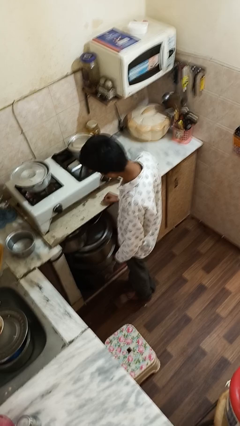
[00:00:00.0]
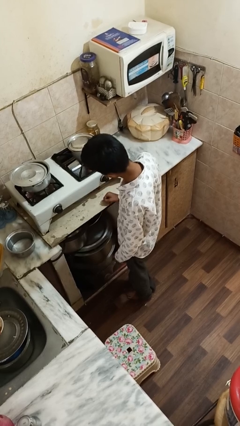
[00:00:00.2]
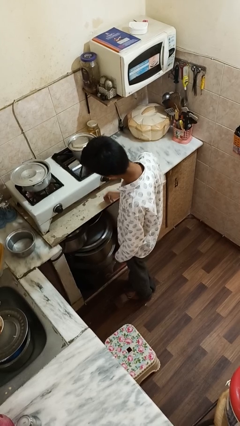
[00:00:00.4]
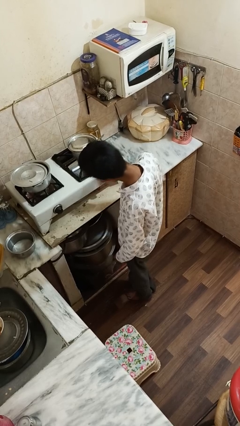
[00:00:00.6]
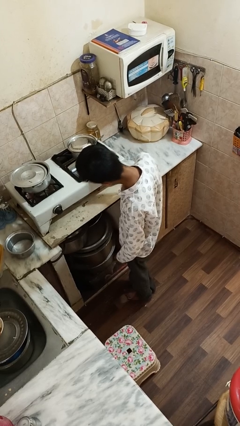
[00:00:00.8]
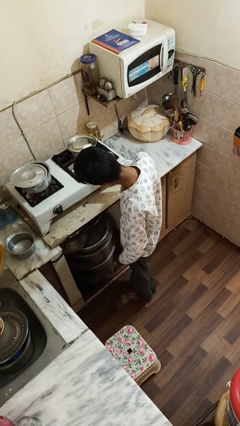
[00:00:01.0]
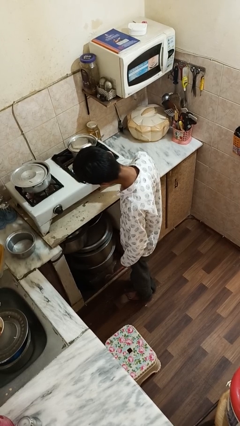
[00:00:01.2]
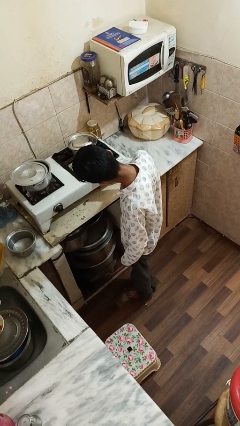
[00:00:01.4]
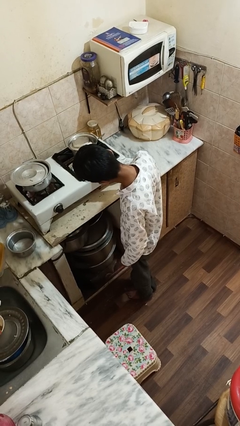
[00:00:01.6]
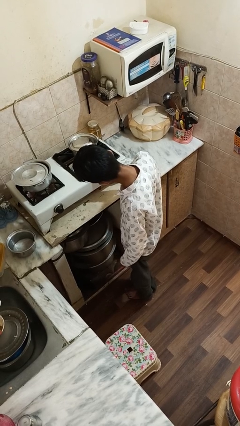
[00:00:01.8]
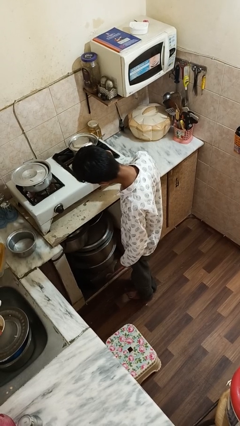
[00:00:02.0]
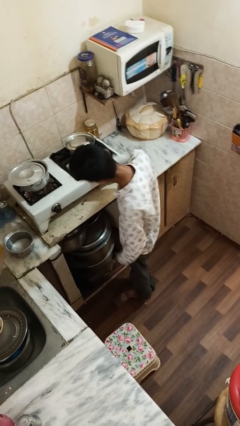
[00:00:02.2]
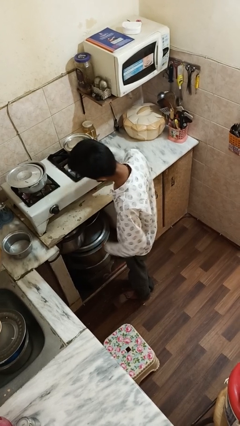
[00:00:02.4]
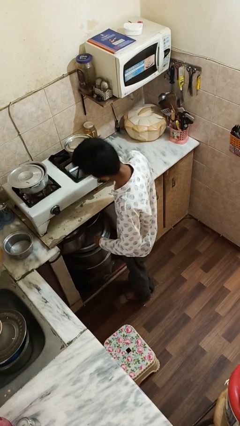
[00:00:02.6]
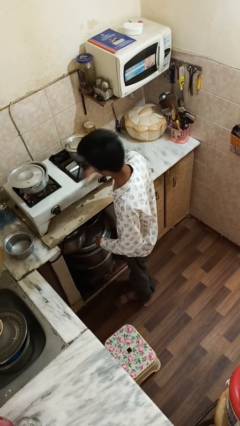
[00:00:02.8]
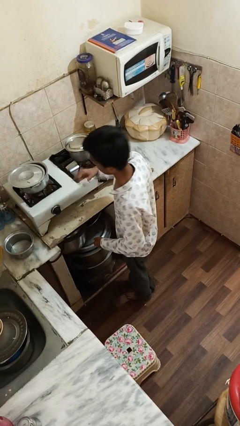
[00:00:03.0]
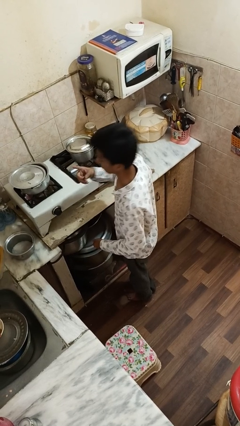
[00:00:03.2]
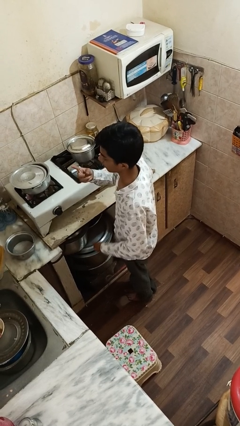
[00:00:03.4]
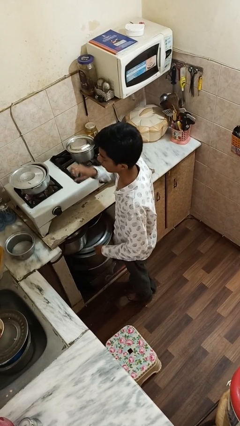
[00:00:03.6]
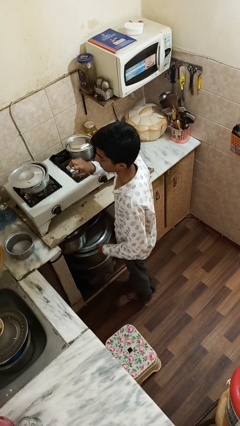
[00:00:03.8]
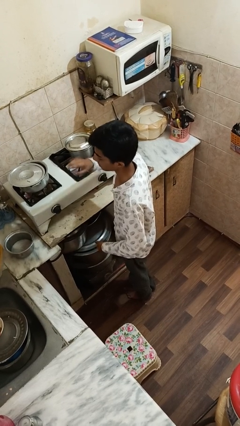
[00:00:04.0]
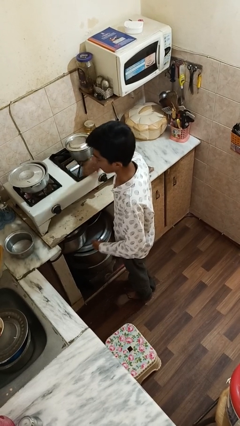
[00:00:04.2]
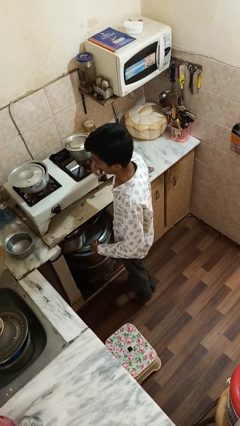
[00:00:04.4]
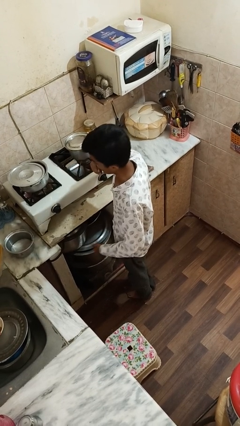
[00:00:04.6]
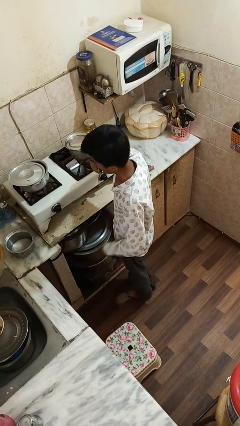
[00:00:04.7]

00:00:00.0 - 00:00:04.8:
person burns hand

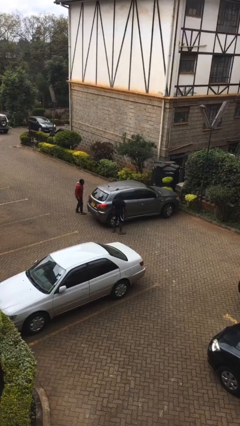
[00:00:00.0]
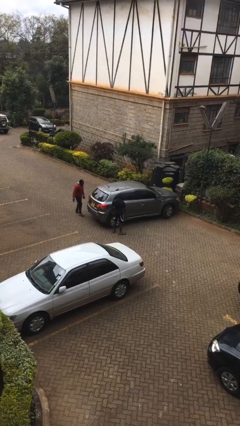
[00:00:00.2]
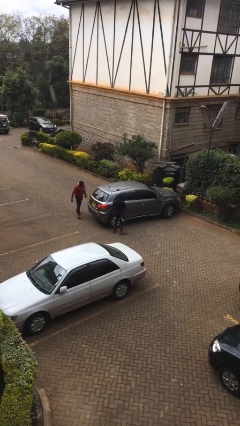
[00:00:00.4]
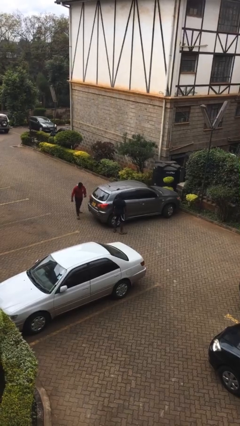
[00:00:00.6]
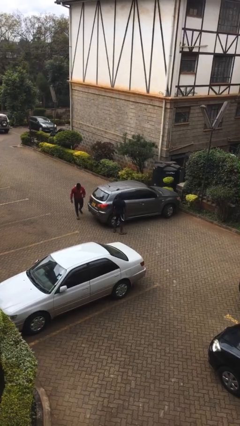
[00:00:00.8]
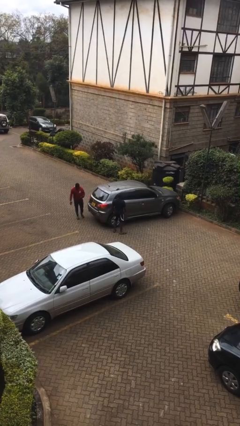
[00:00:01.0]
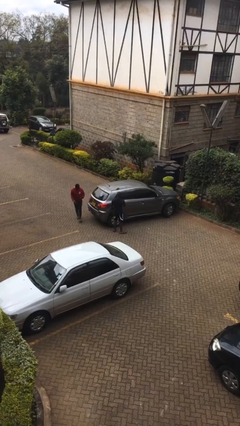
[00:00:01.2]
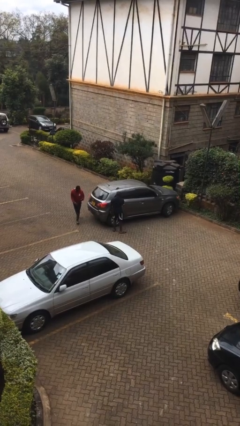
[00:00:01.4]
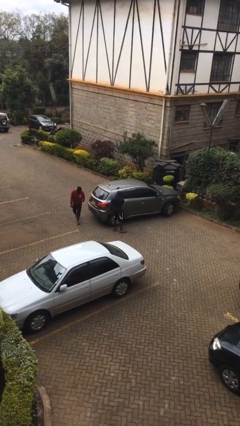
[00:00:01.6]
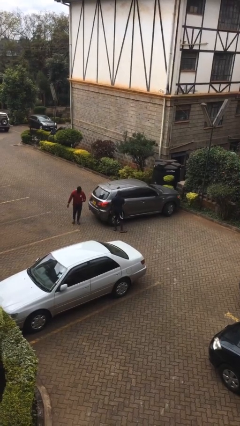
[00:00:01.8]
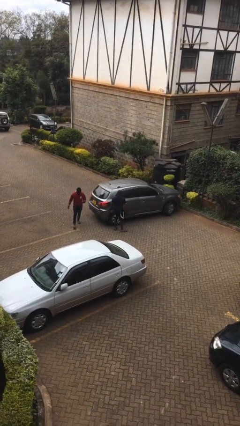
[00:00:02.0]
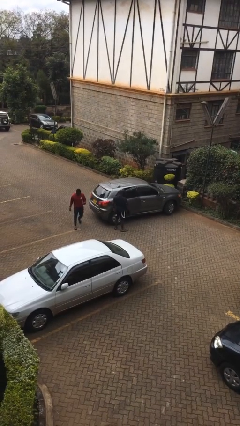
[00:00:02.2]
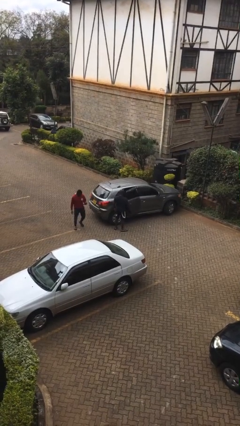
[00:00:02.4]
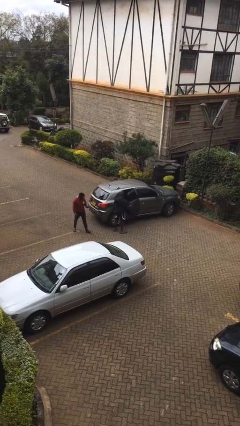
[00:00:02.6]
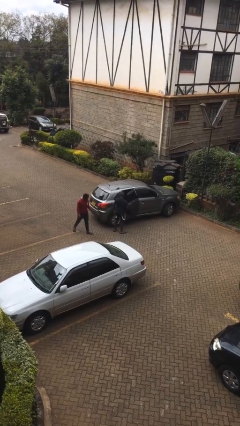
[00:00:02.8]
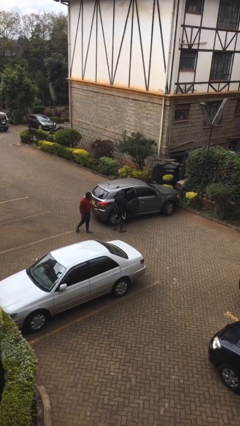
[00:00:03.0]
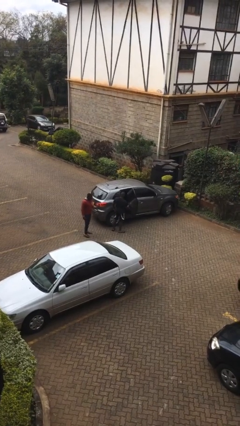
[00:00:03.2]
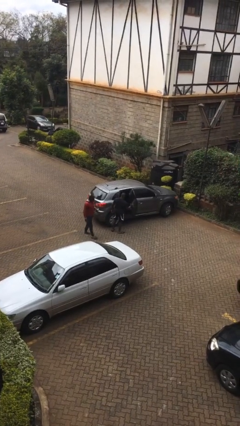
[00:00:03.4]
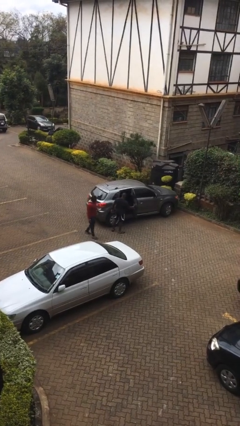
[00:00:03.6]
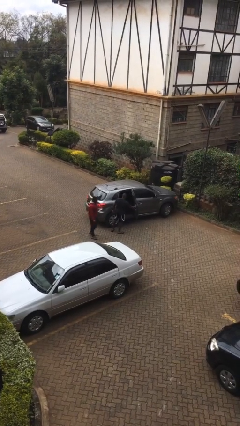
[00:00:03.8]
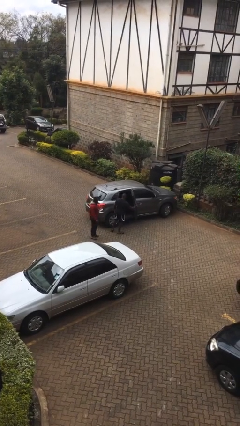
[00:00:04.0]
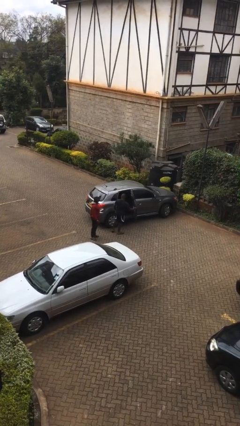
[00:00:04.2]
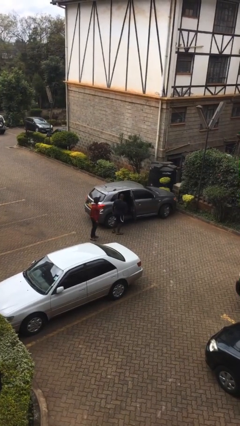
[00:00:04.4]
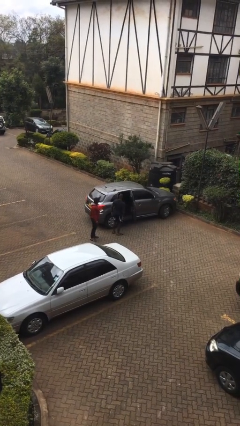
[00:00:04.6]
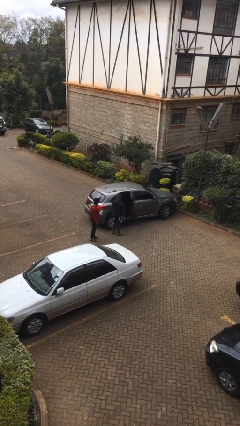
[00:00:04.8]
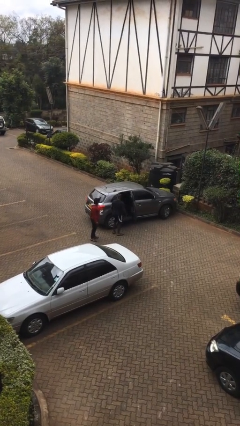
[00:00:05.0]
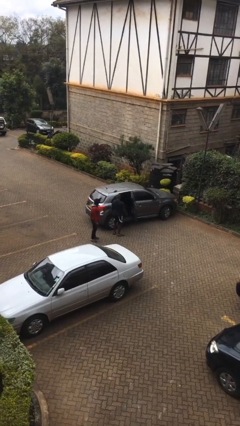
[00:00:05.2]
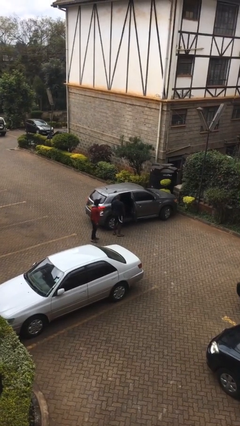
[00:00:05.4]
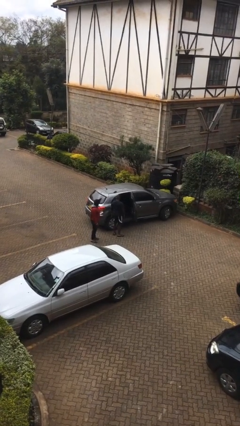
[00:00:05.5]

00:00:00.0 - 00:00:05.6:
person opens car door

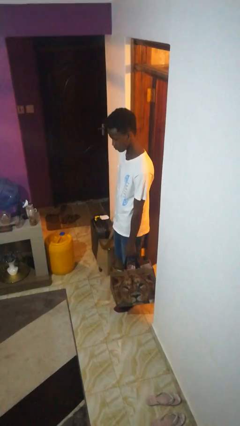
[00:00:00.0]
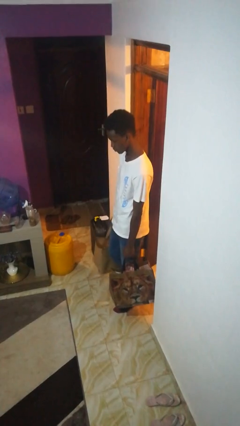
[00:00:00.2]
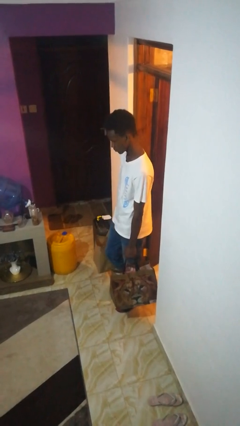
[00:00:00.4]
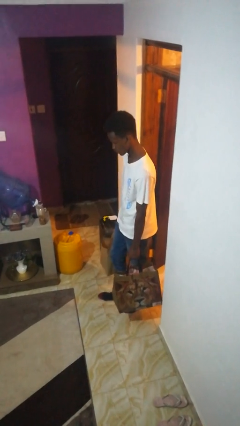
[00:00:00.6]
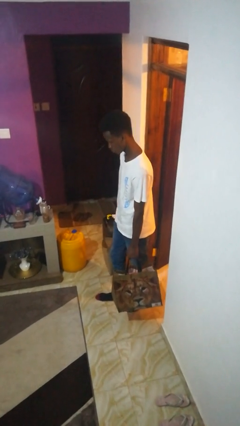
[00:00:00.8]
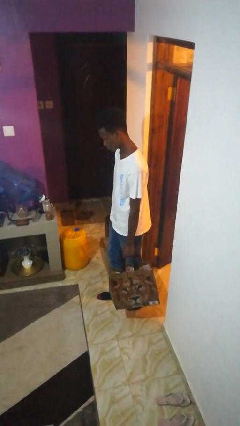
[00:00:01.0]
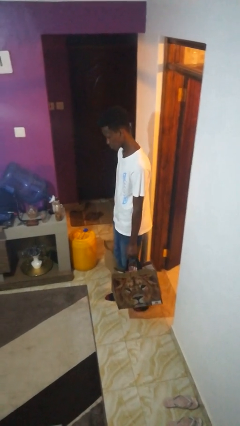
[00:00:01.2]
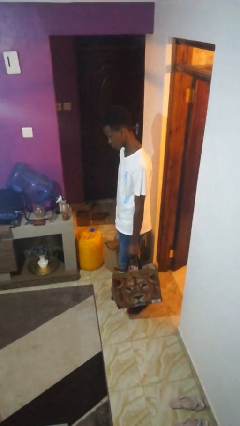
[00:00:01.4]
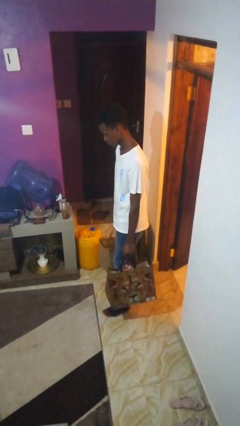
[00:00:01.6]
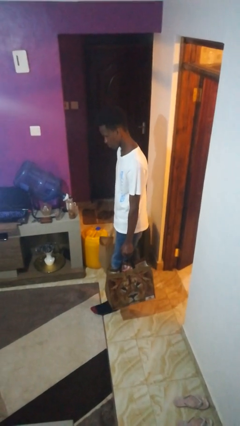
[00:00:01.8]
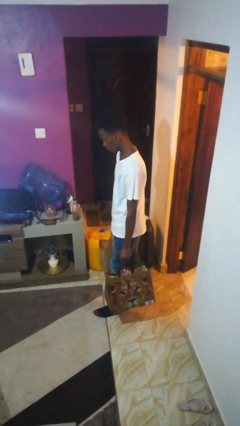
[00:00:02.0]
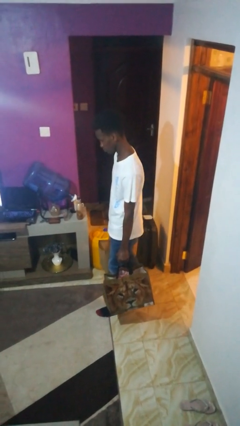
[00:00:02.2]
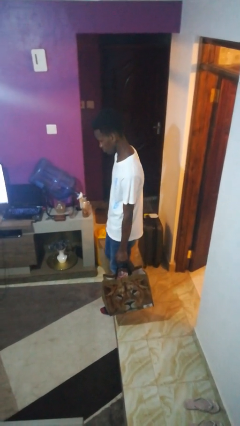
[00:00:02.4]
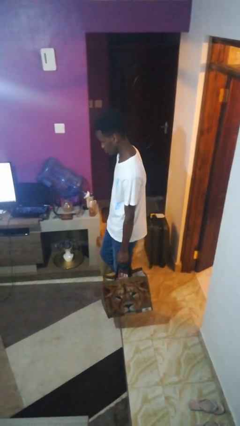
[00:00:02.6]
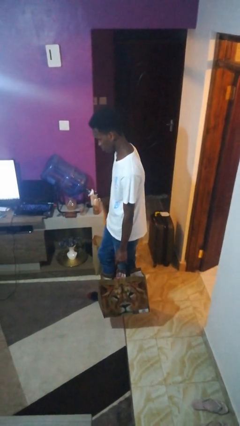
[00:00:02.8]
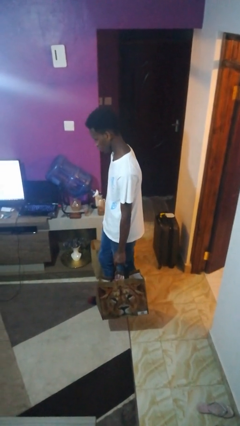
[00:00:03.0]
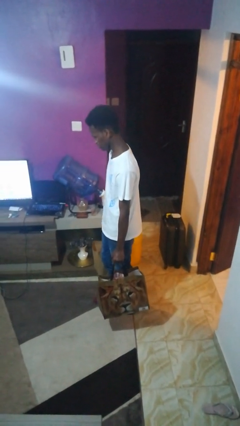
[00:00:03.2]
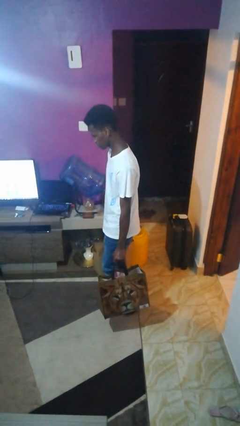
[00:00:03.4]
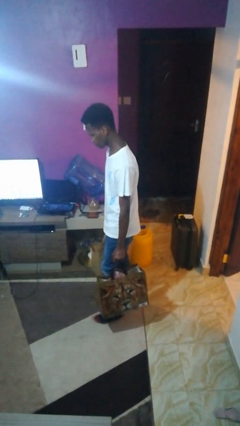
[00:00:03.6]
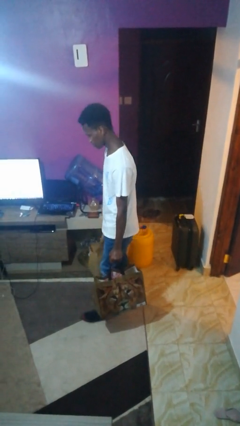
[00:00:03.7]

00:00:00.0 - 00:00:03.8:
person carries groceries

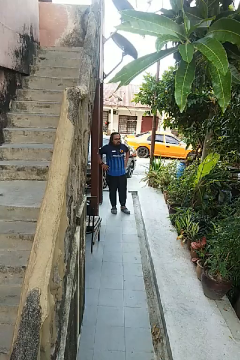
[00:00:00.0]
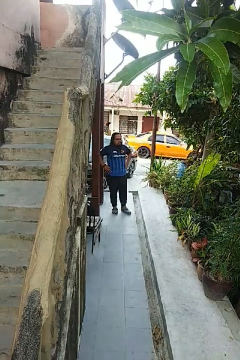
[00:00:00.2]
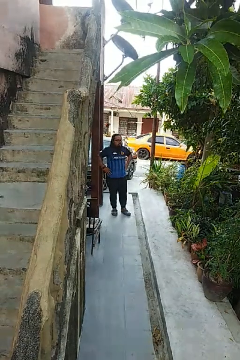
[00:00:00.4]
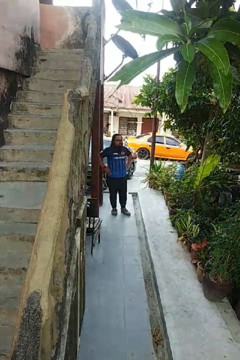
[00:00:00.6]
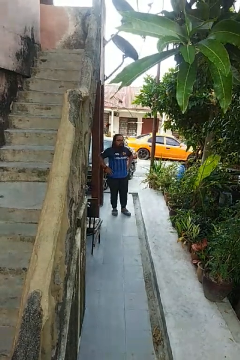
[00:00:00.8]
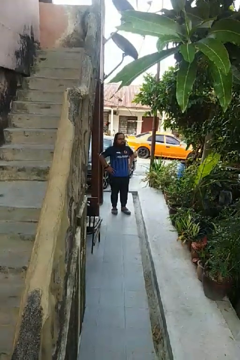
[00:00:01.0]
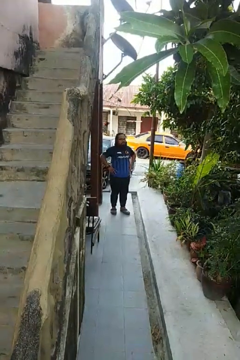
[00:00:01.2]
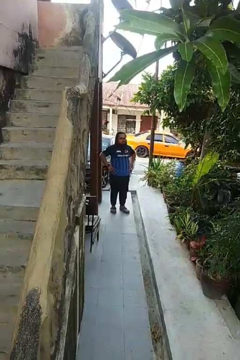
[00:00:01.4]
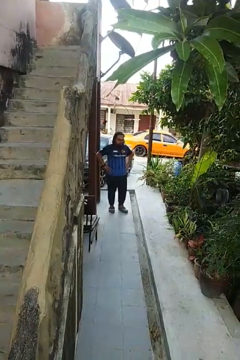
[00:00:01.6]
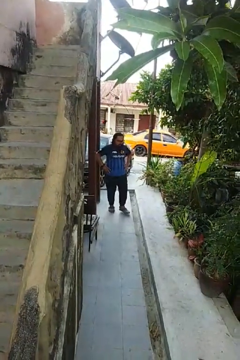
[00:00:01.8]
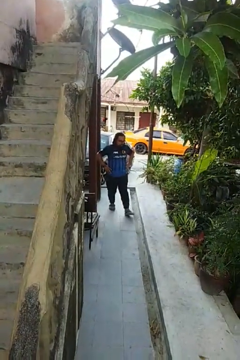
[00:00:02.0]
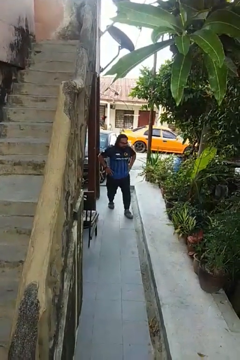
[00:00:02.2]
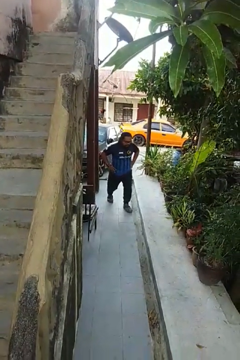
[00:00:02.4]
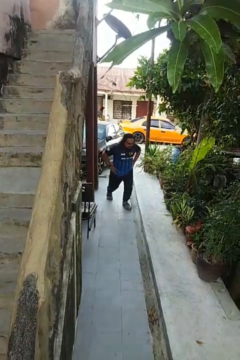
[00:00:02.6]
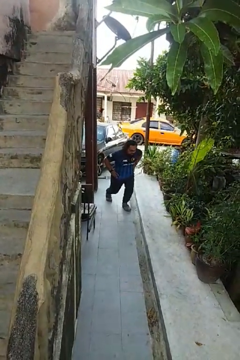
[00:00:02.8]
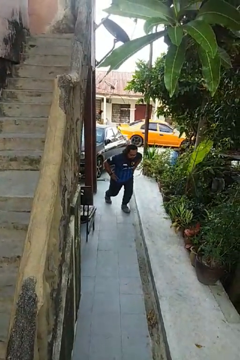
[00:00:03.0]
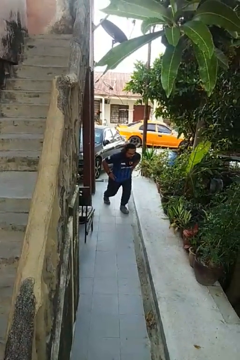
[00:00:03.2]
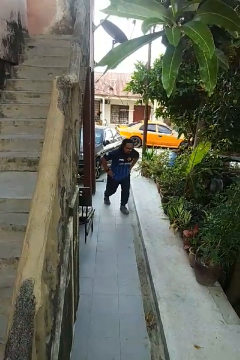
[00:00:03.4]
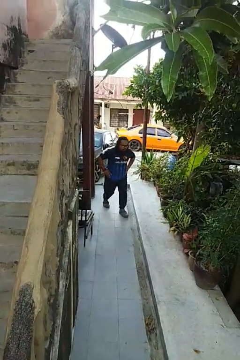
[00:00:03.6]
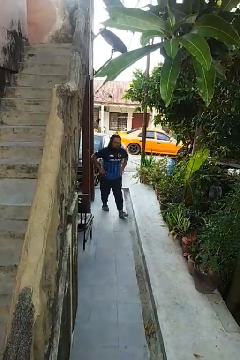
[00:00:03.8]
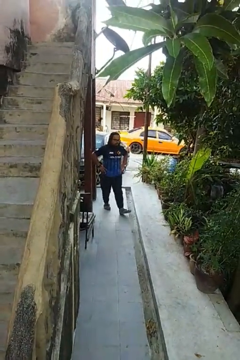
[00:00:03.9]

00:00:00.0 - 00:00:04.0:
person exercises with lunges
